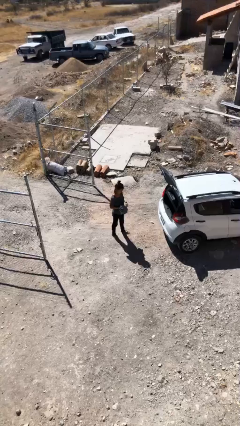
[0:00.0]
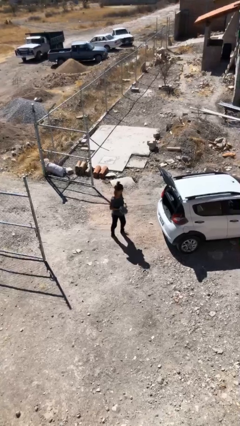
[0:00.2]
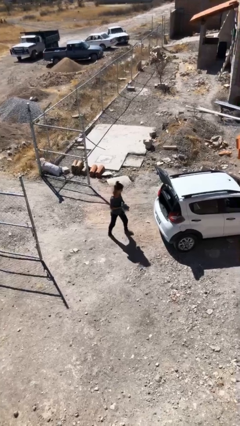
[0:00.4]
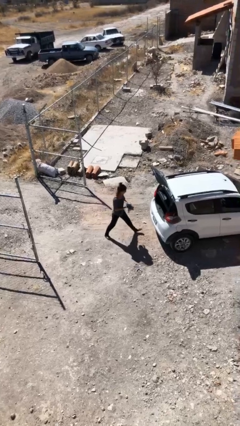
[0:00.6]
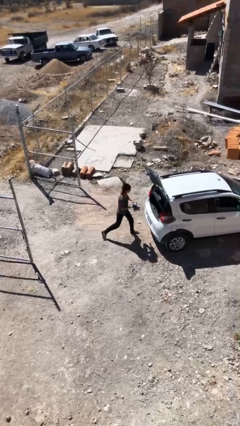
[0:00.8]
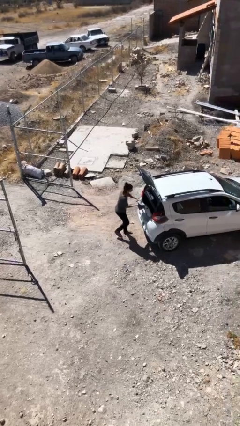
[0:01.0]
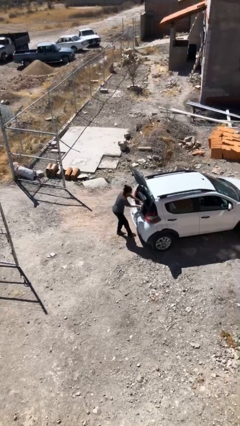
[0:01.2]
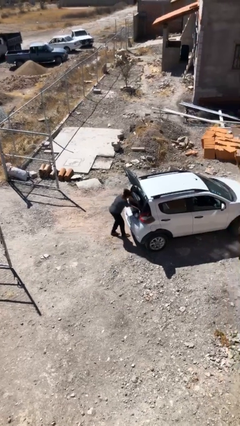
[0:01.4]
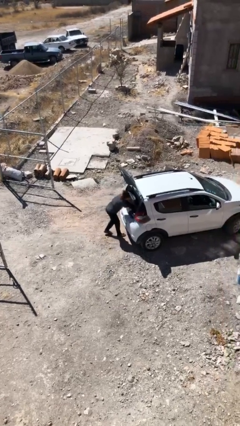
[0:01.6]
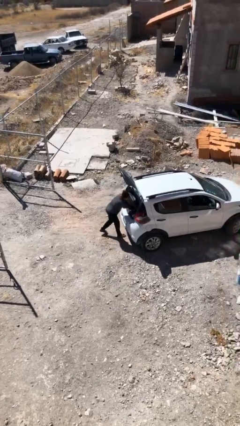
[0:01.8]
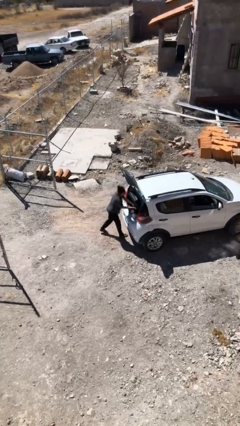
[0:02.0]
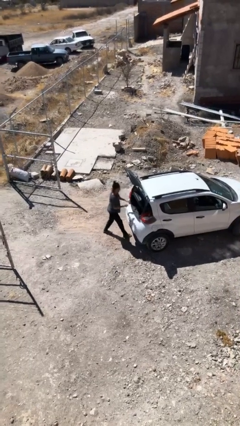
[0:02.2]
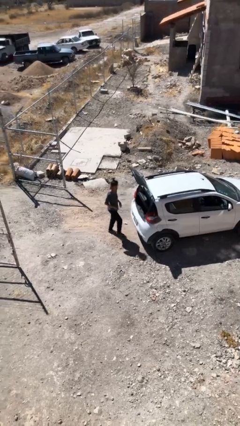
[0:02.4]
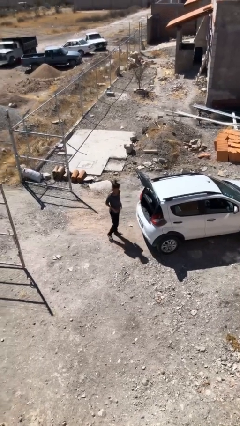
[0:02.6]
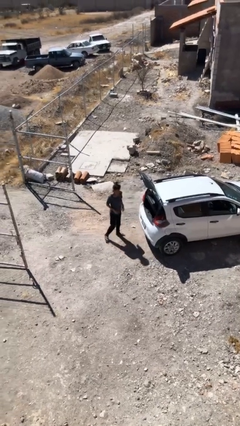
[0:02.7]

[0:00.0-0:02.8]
person loads car

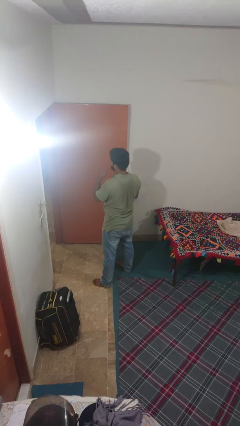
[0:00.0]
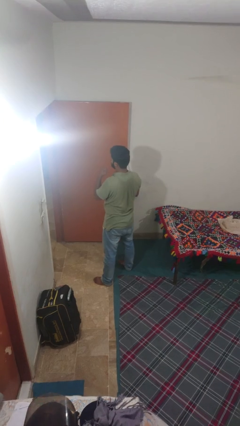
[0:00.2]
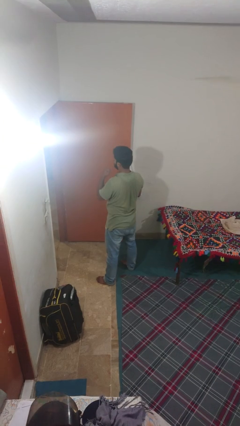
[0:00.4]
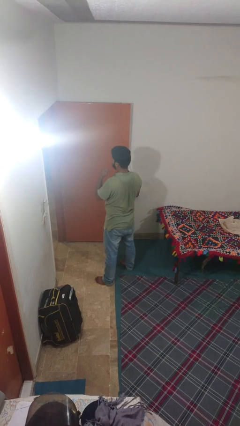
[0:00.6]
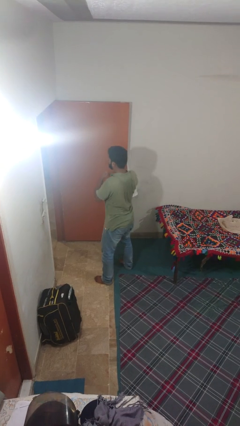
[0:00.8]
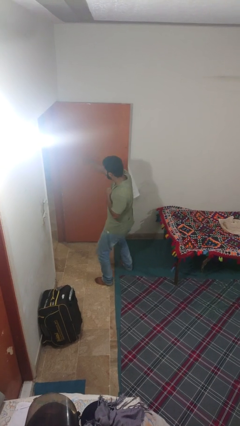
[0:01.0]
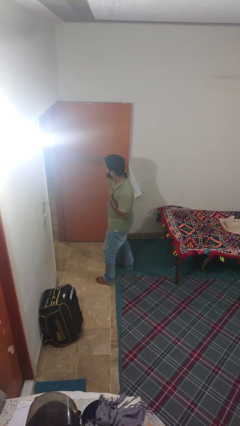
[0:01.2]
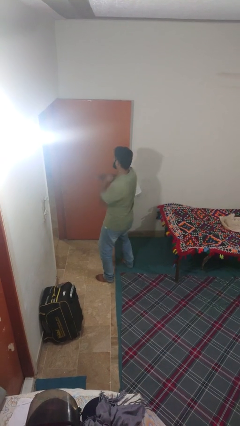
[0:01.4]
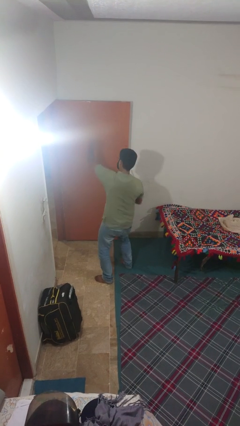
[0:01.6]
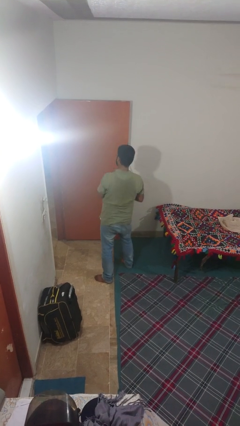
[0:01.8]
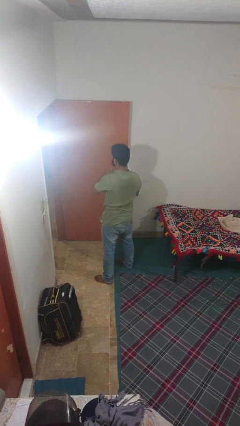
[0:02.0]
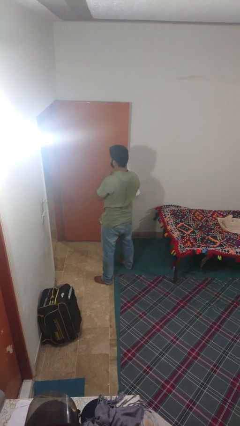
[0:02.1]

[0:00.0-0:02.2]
person punches

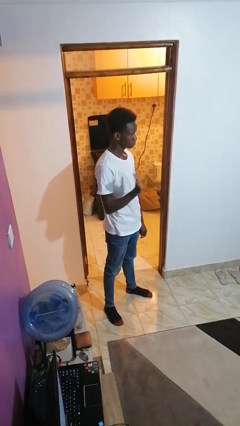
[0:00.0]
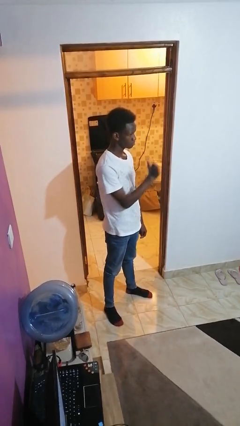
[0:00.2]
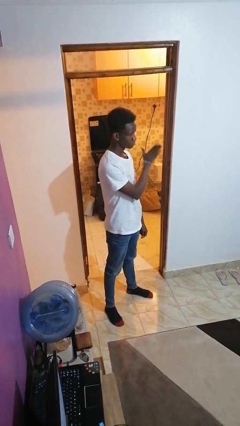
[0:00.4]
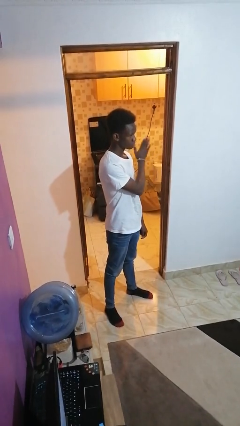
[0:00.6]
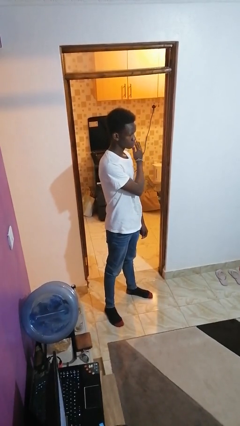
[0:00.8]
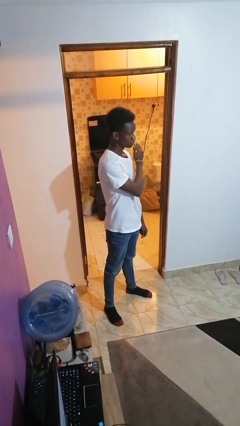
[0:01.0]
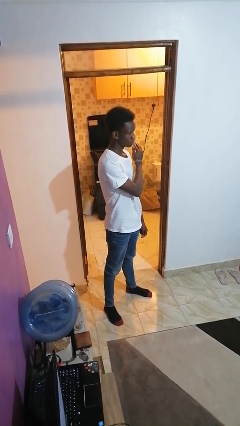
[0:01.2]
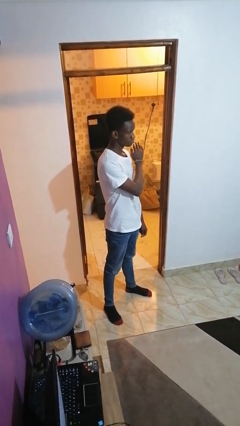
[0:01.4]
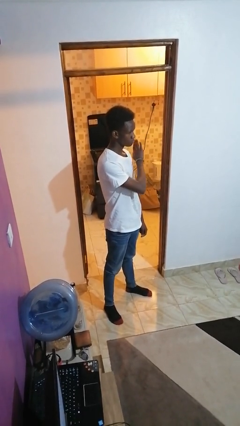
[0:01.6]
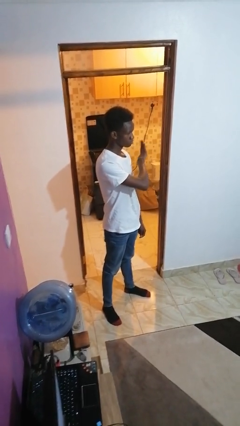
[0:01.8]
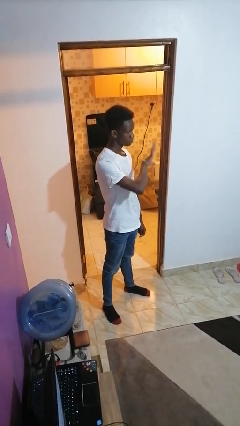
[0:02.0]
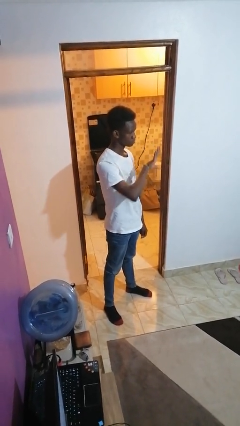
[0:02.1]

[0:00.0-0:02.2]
person gestures swipe left

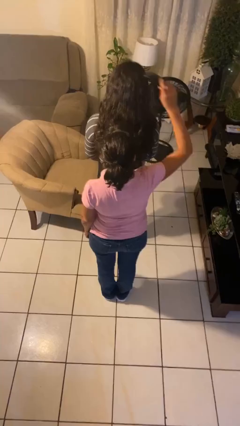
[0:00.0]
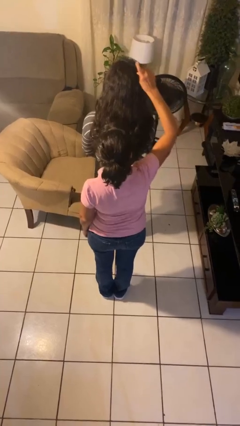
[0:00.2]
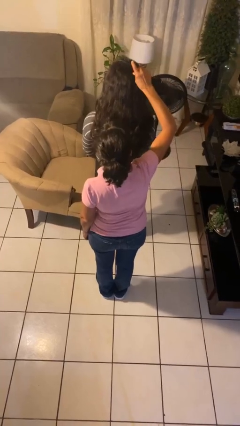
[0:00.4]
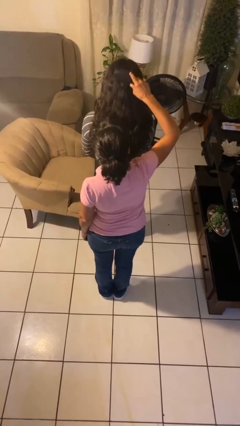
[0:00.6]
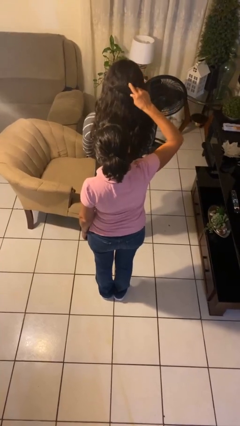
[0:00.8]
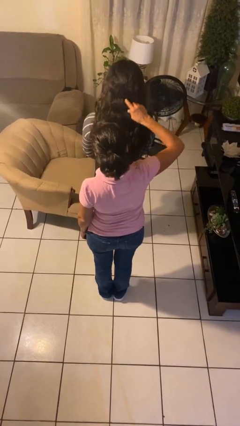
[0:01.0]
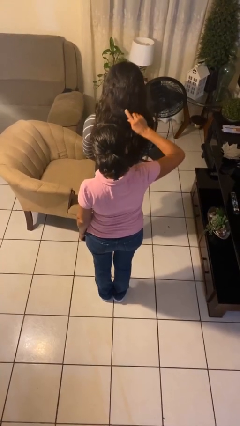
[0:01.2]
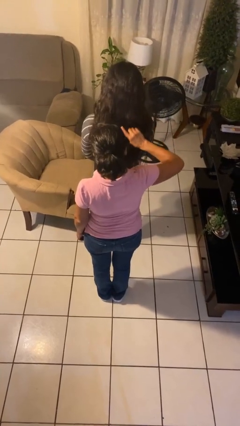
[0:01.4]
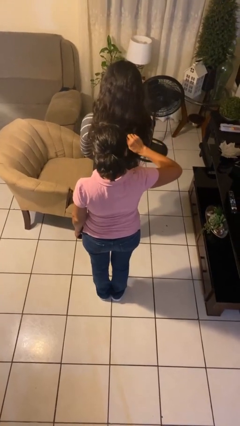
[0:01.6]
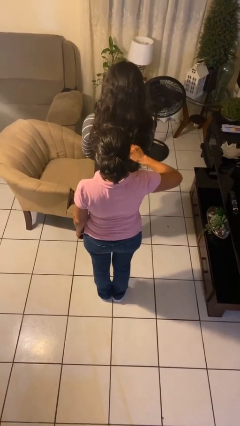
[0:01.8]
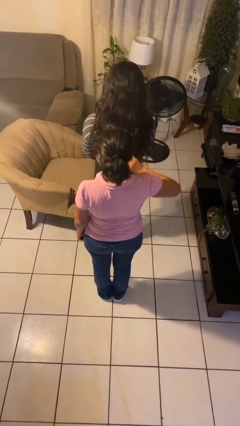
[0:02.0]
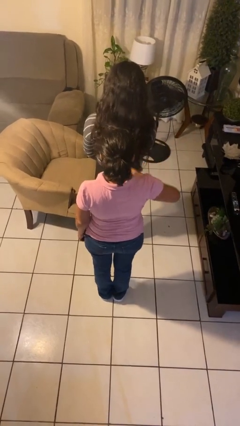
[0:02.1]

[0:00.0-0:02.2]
person brushes hair of person

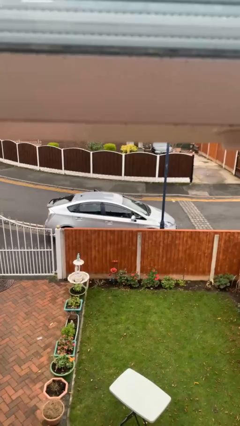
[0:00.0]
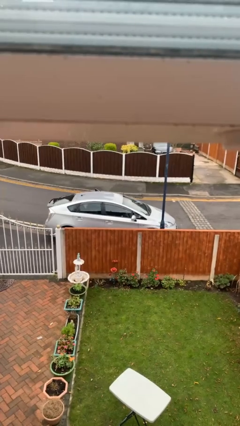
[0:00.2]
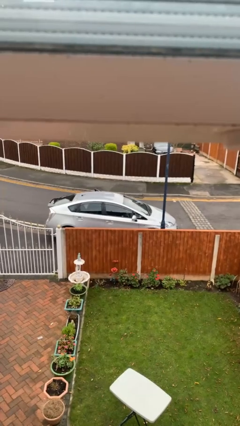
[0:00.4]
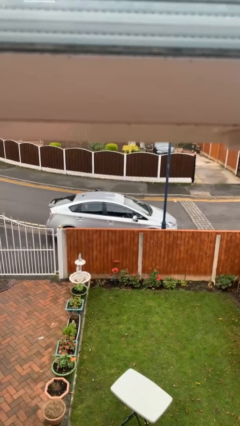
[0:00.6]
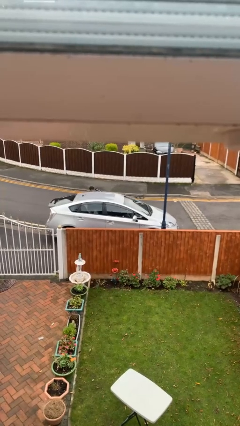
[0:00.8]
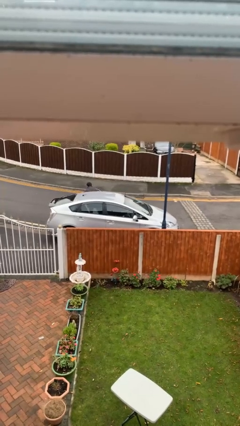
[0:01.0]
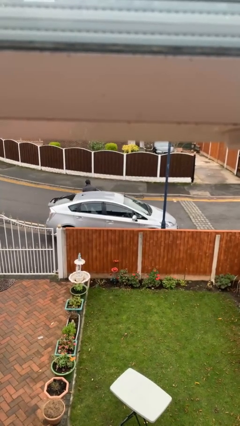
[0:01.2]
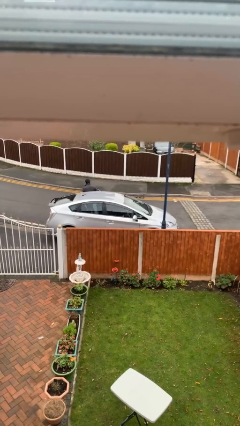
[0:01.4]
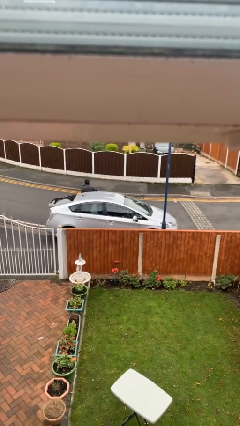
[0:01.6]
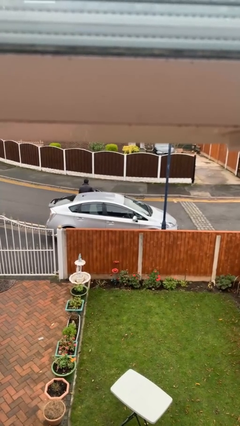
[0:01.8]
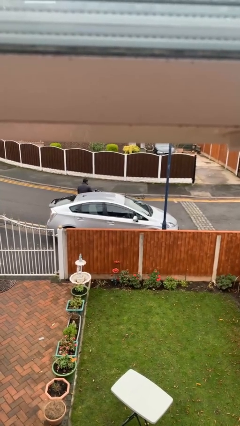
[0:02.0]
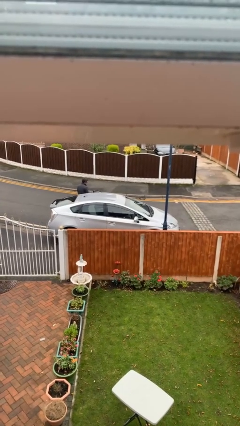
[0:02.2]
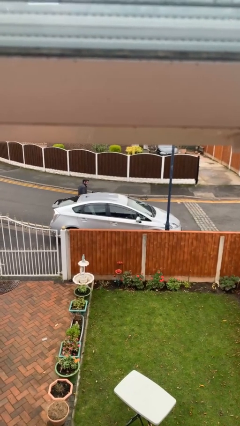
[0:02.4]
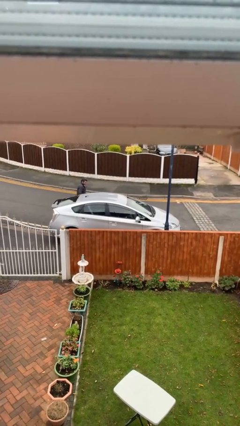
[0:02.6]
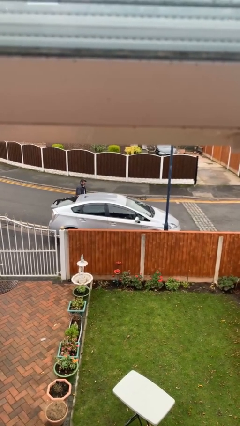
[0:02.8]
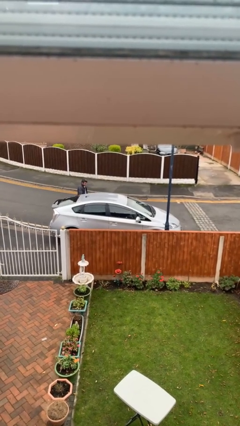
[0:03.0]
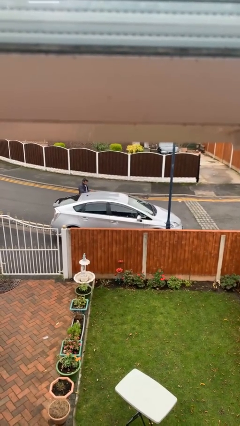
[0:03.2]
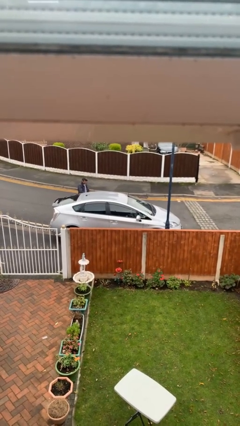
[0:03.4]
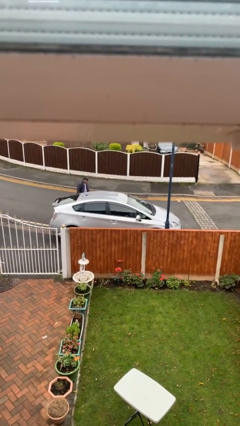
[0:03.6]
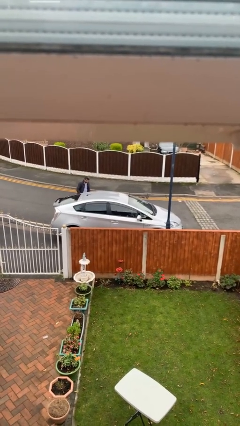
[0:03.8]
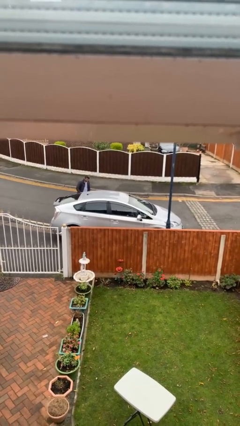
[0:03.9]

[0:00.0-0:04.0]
car drops off person

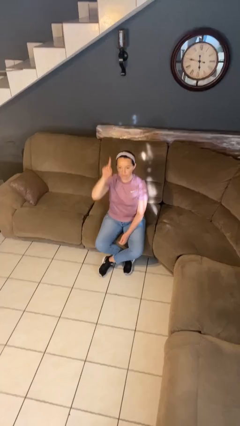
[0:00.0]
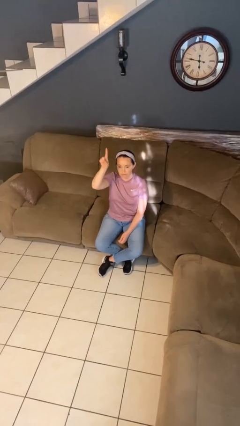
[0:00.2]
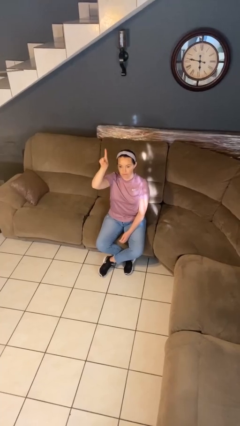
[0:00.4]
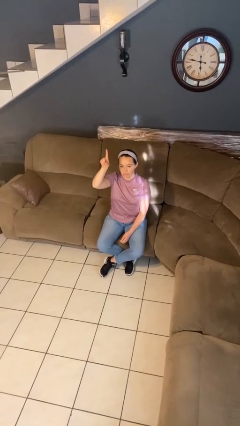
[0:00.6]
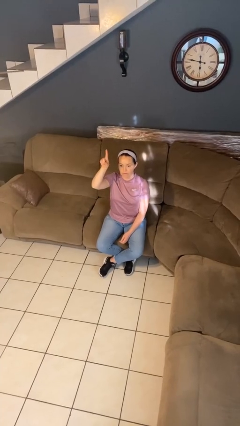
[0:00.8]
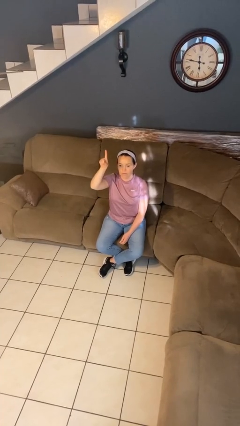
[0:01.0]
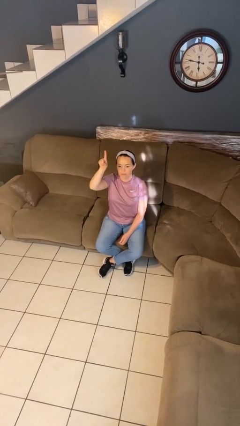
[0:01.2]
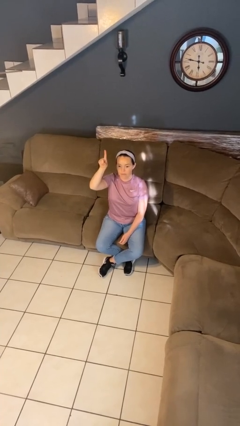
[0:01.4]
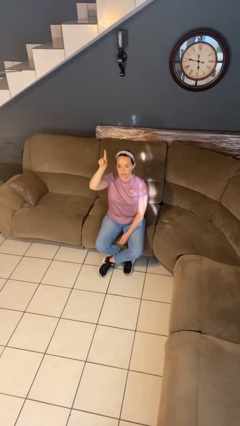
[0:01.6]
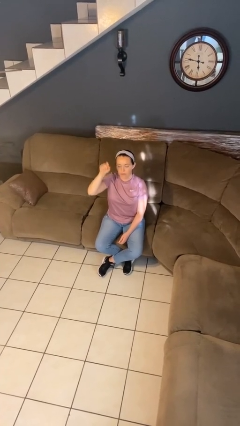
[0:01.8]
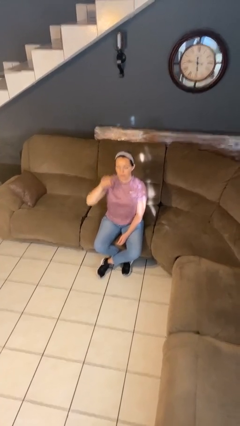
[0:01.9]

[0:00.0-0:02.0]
person gestures number one

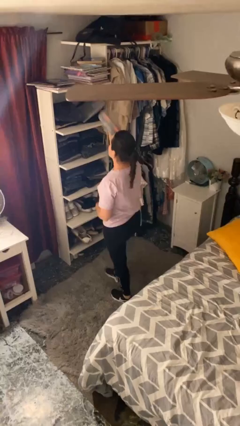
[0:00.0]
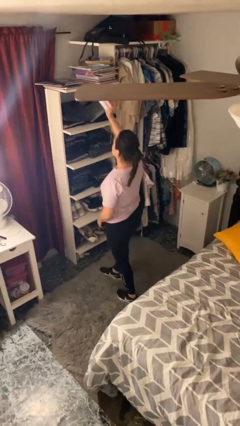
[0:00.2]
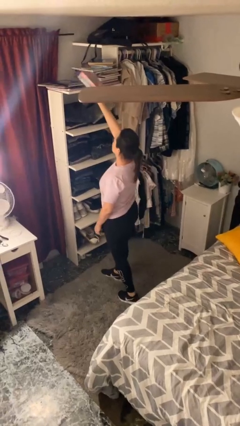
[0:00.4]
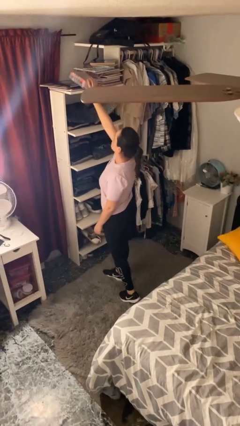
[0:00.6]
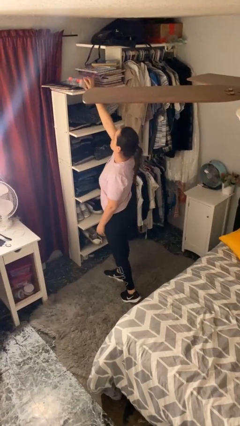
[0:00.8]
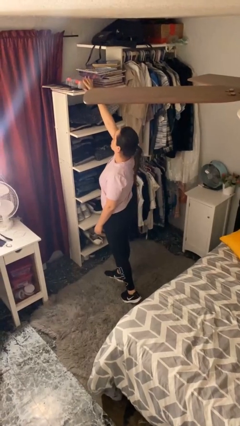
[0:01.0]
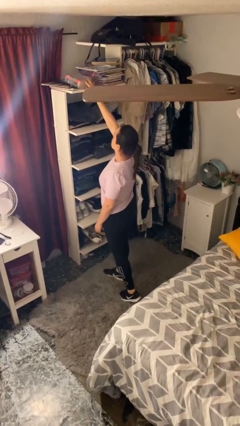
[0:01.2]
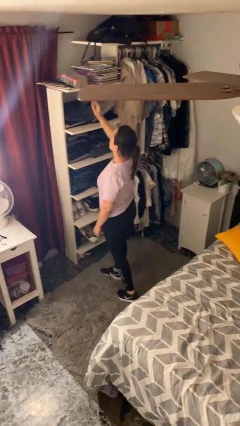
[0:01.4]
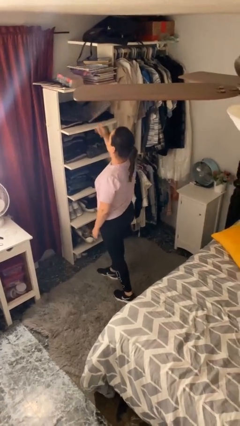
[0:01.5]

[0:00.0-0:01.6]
person puts down object on shelf

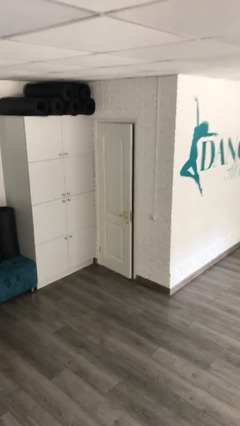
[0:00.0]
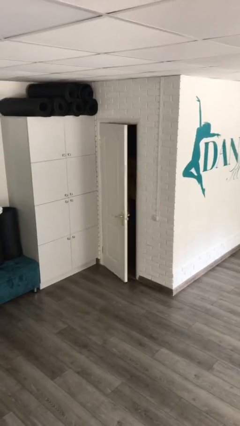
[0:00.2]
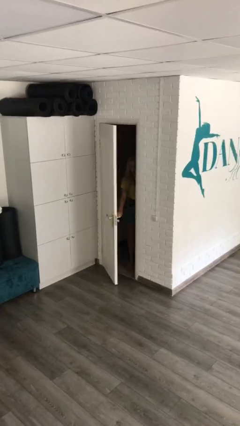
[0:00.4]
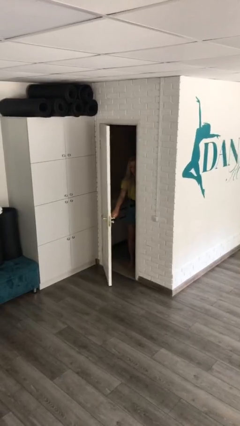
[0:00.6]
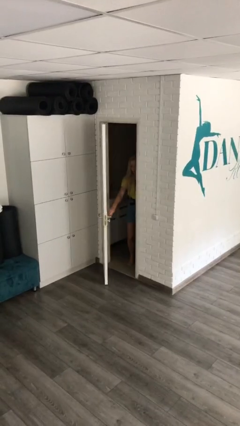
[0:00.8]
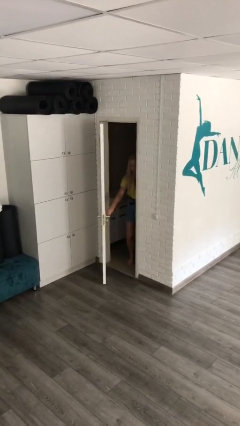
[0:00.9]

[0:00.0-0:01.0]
person opens facility door